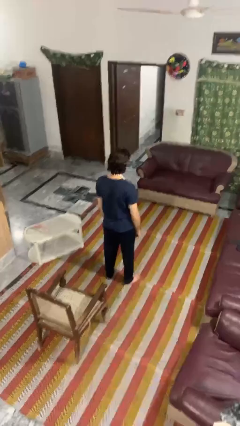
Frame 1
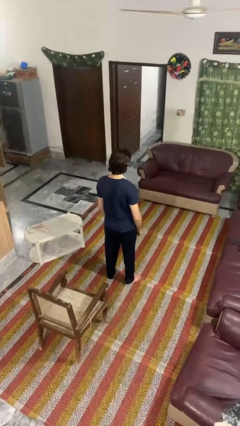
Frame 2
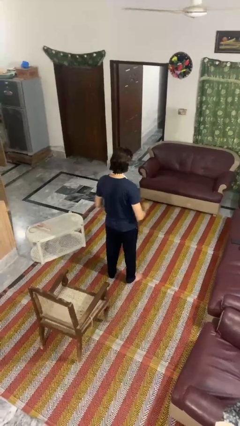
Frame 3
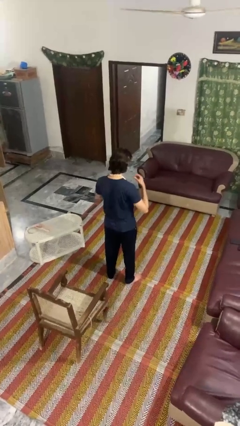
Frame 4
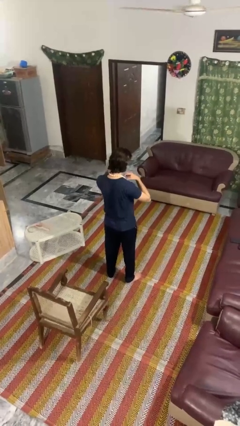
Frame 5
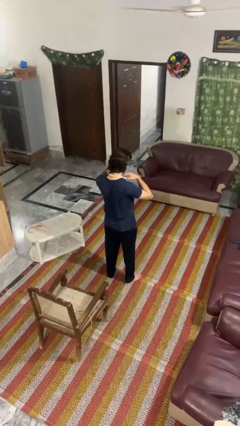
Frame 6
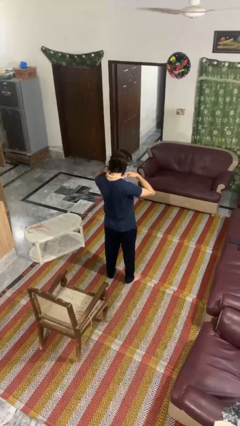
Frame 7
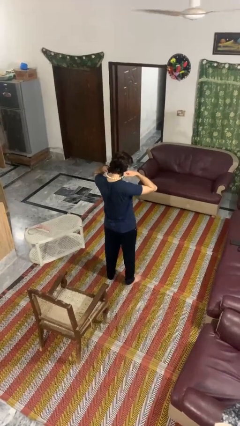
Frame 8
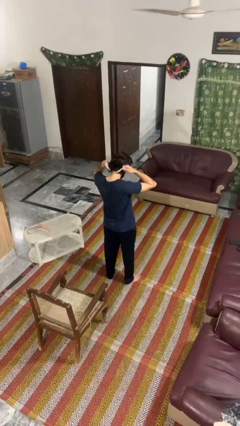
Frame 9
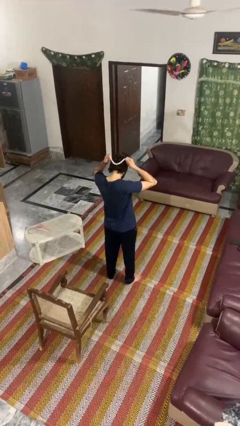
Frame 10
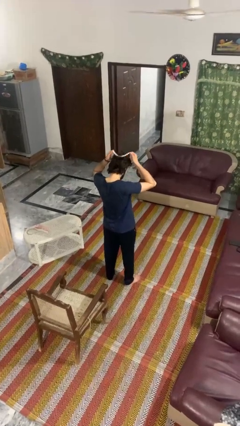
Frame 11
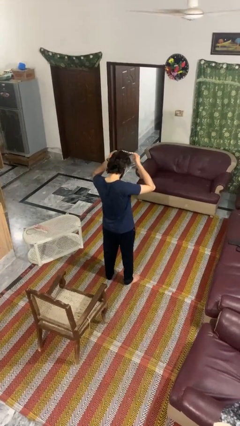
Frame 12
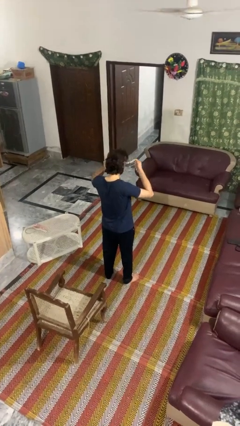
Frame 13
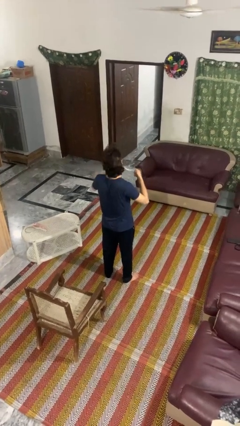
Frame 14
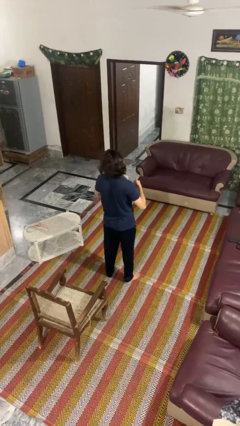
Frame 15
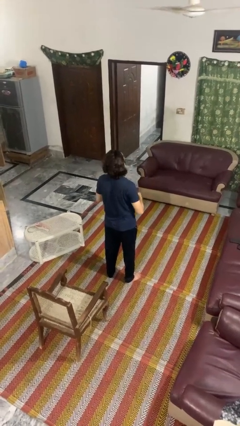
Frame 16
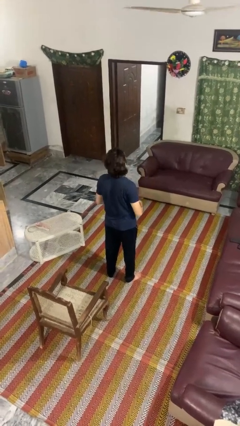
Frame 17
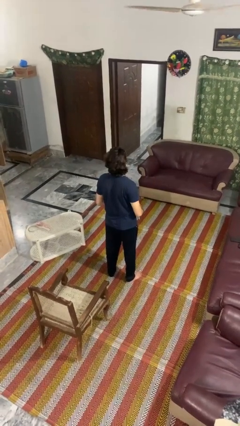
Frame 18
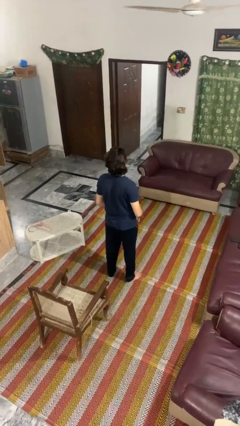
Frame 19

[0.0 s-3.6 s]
person takes off necklace

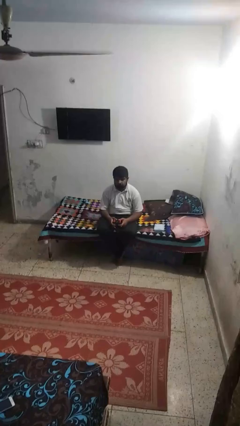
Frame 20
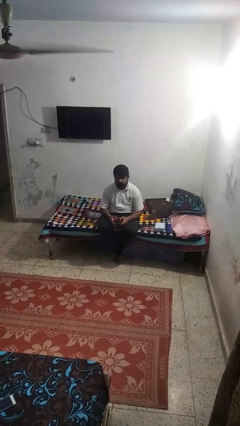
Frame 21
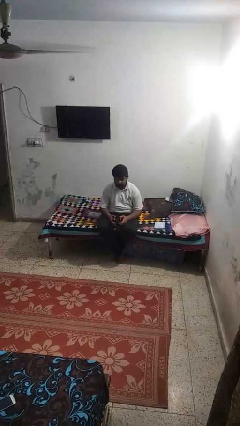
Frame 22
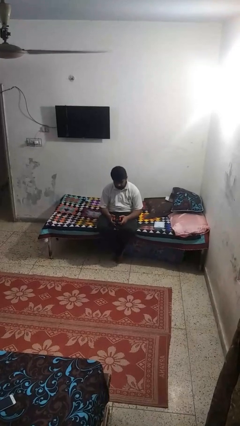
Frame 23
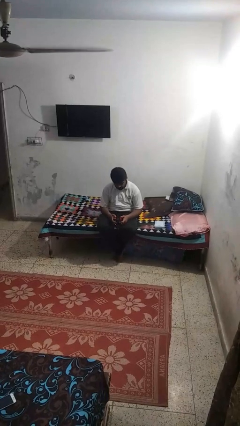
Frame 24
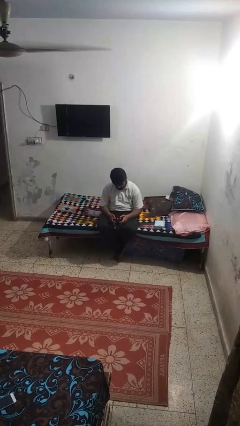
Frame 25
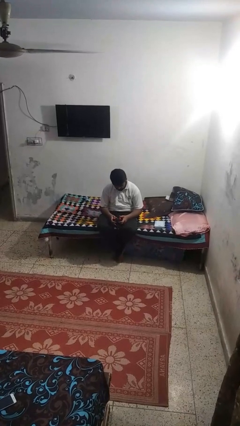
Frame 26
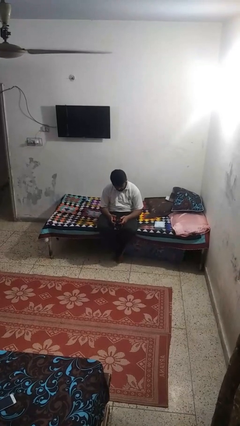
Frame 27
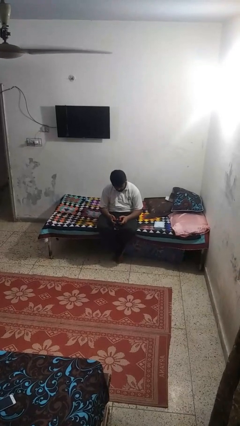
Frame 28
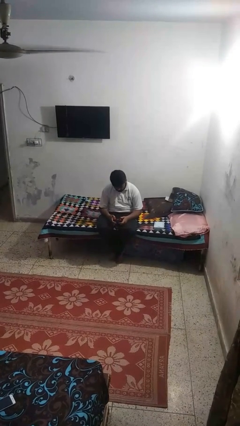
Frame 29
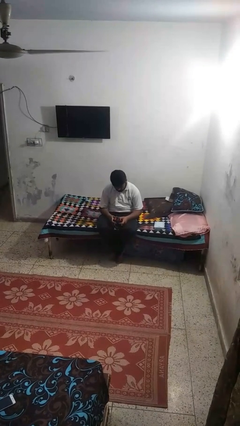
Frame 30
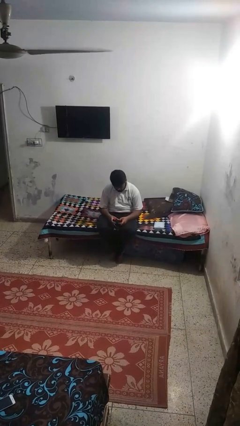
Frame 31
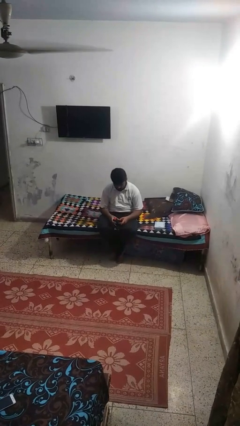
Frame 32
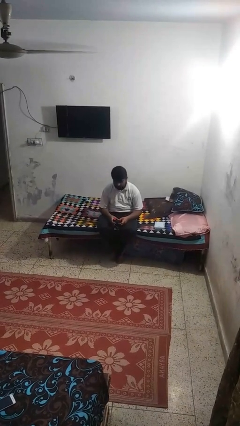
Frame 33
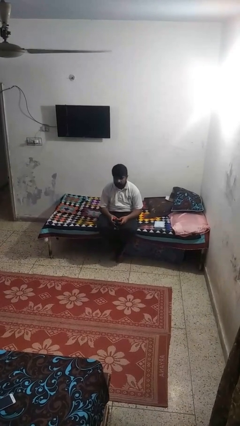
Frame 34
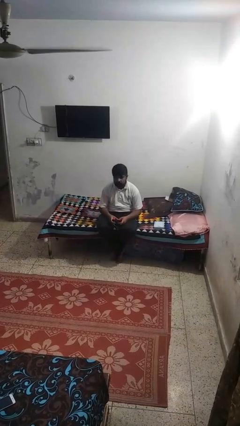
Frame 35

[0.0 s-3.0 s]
person interacts with handheld game

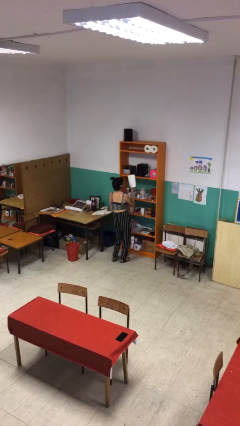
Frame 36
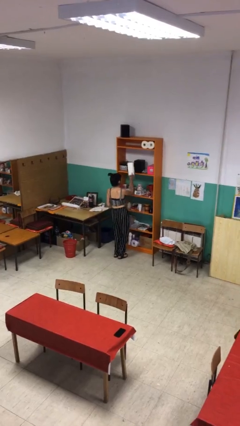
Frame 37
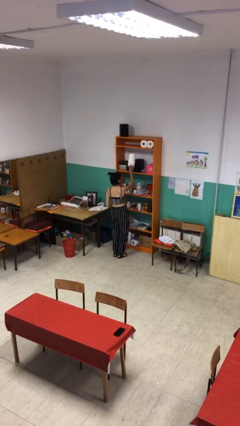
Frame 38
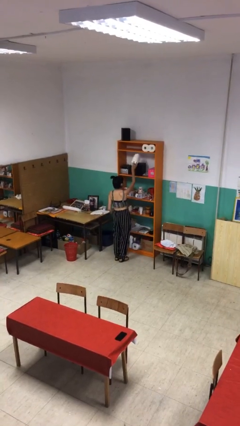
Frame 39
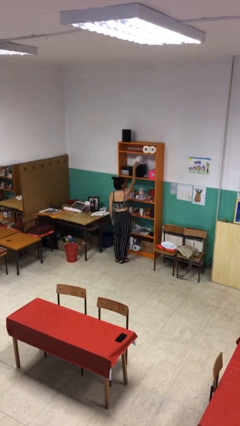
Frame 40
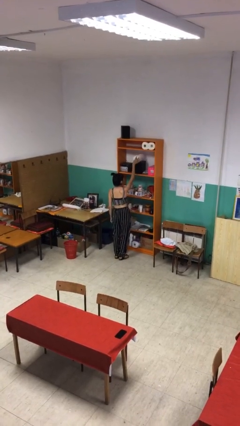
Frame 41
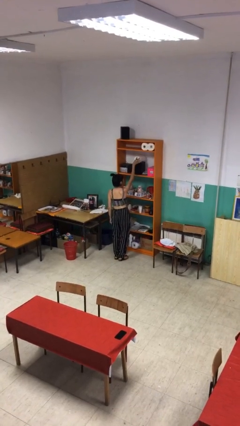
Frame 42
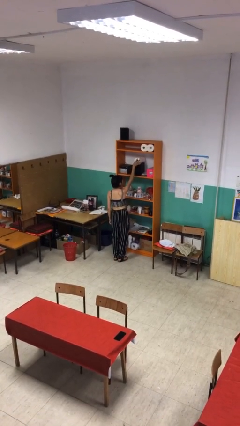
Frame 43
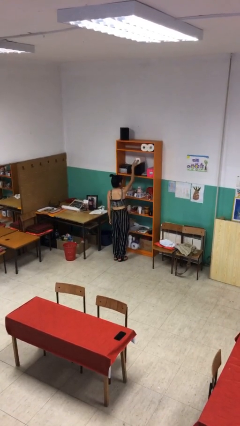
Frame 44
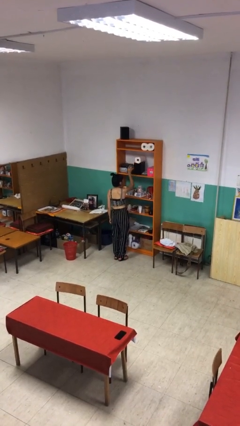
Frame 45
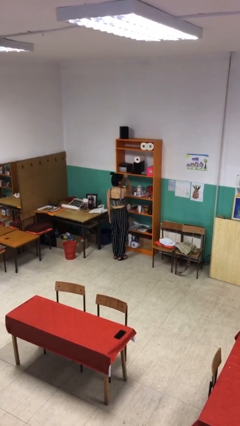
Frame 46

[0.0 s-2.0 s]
person puts down object on shelf

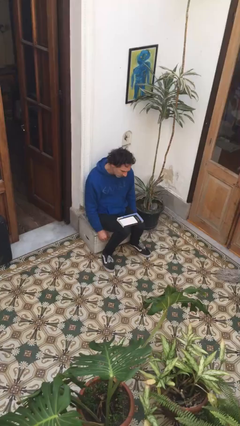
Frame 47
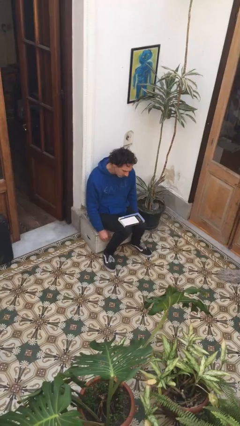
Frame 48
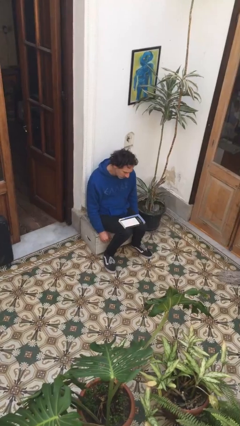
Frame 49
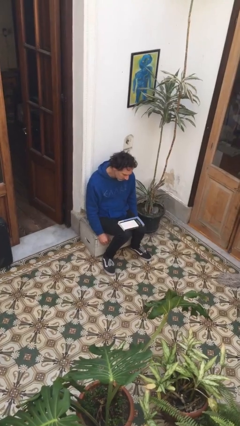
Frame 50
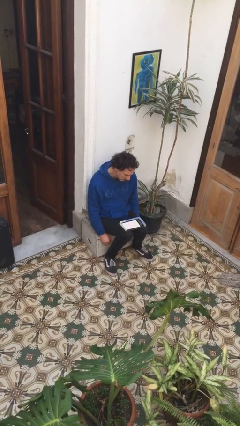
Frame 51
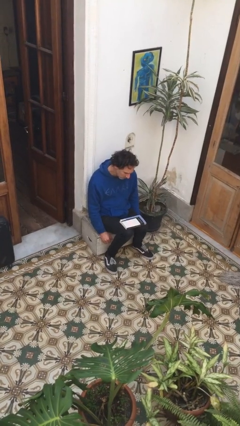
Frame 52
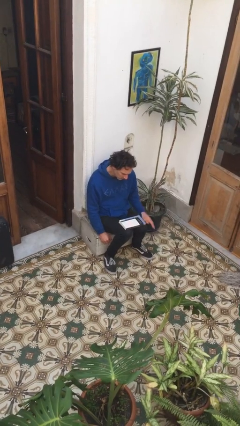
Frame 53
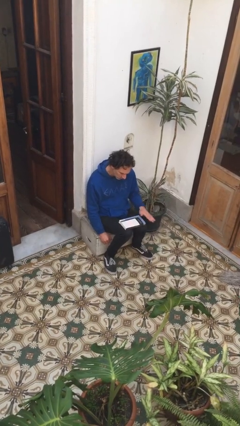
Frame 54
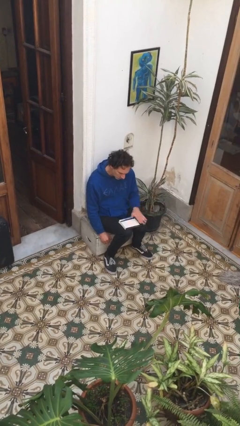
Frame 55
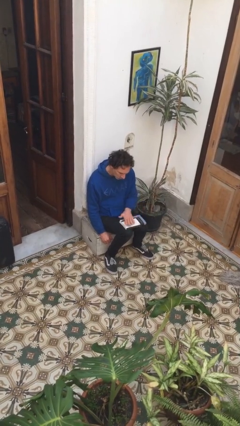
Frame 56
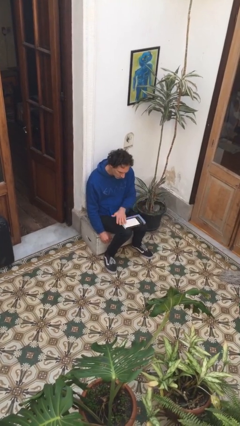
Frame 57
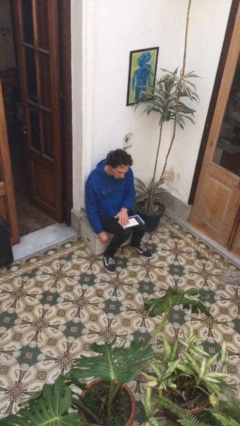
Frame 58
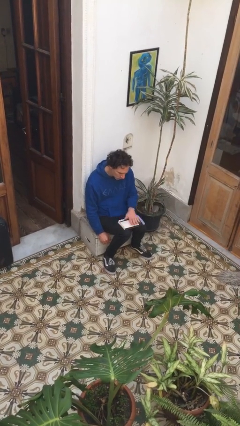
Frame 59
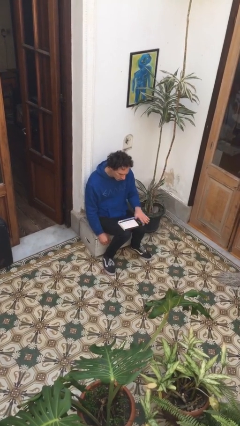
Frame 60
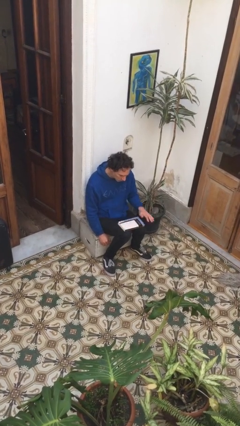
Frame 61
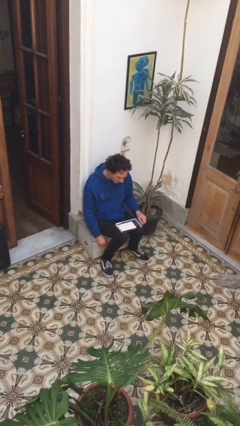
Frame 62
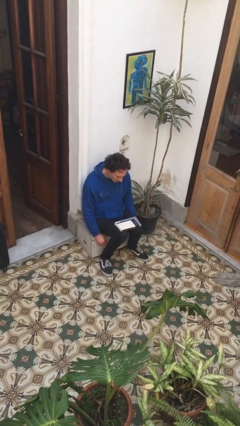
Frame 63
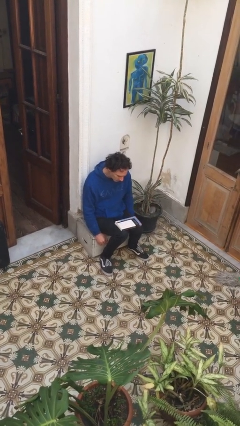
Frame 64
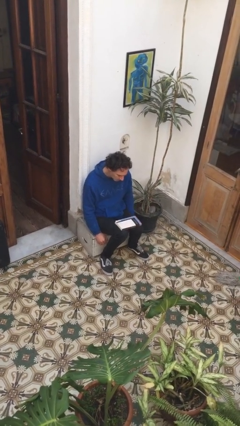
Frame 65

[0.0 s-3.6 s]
person waves hand over object

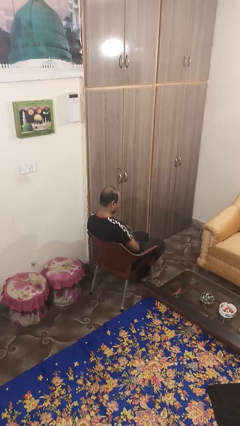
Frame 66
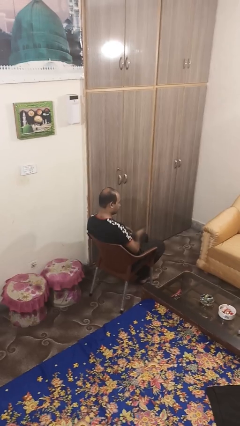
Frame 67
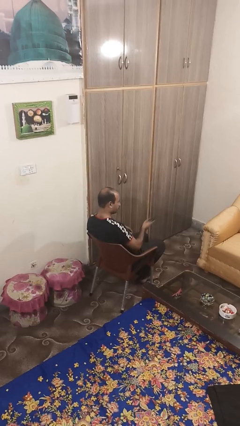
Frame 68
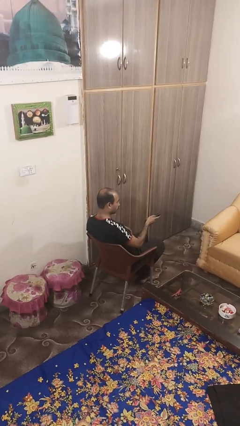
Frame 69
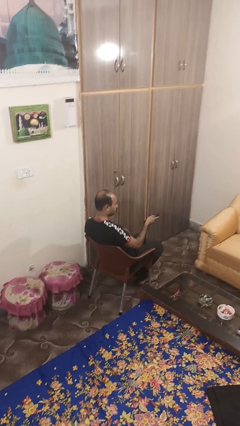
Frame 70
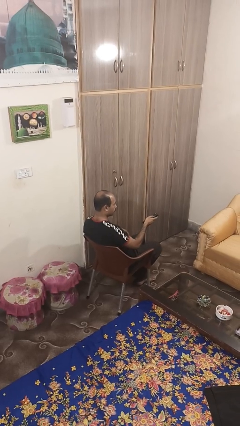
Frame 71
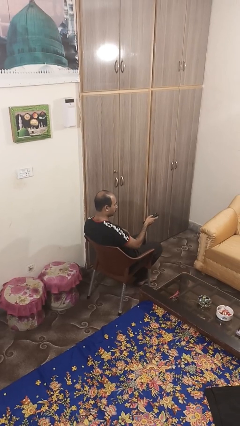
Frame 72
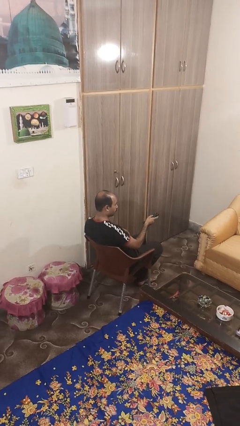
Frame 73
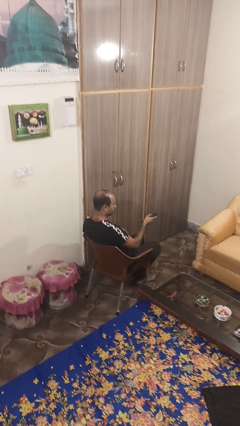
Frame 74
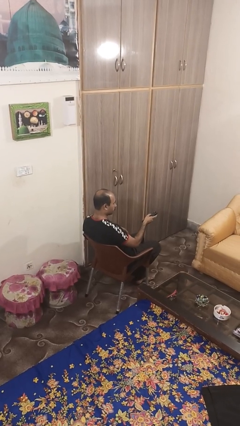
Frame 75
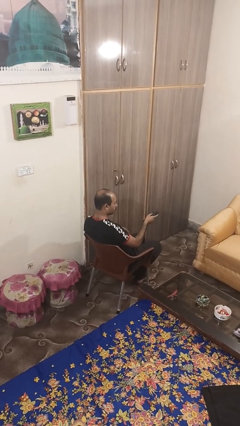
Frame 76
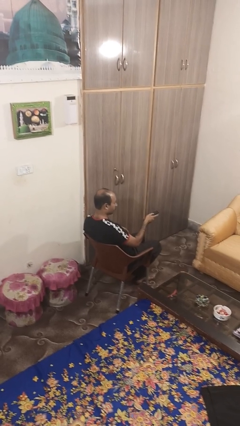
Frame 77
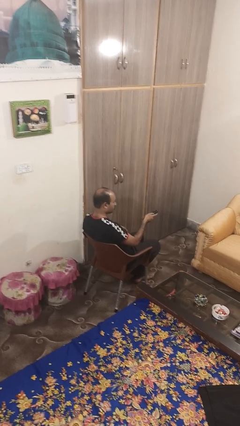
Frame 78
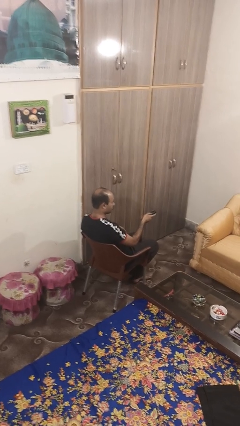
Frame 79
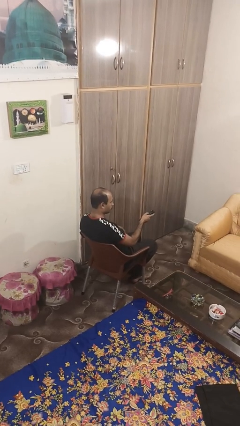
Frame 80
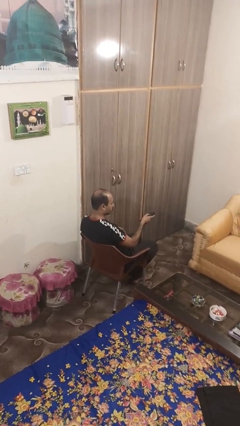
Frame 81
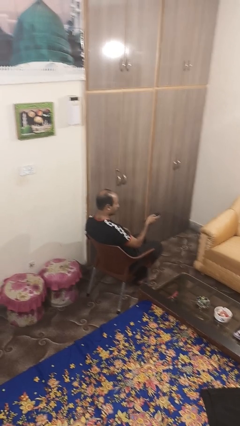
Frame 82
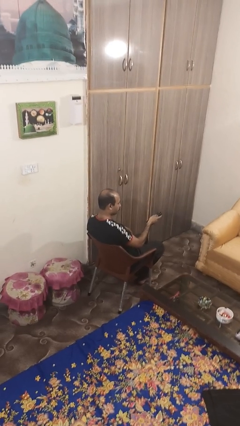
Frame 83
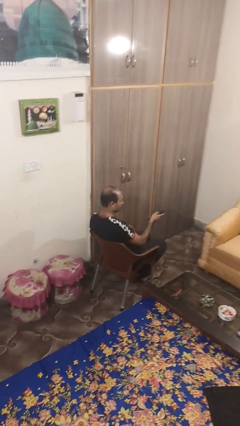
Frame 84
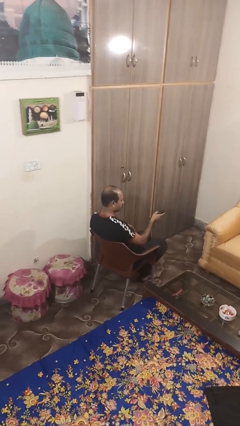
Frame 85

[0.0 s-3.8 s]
person uses television remote

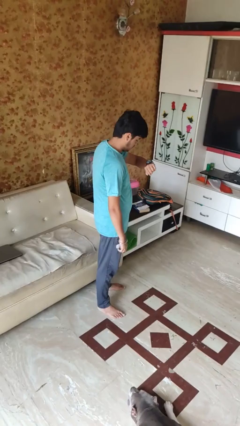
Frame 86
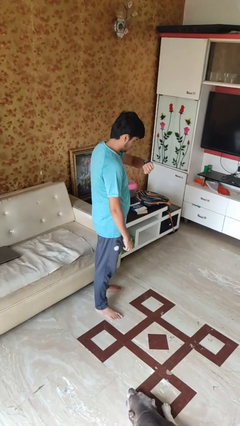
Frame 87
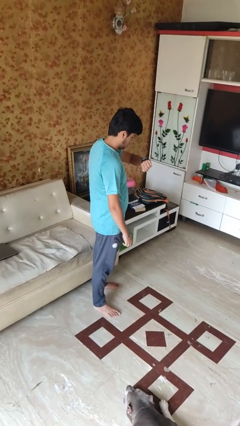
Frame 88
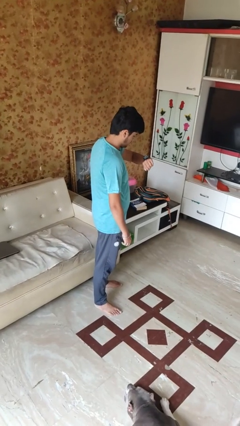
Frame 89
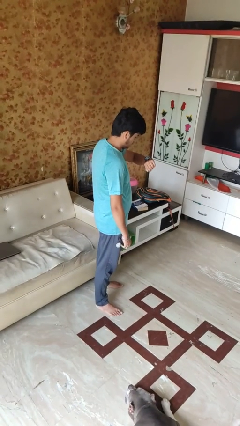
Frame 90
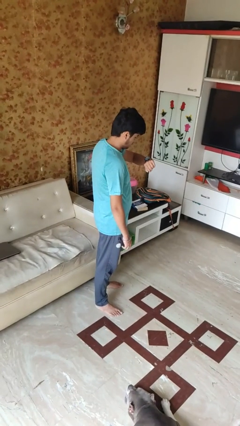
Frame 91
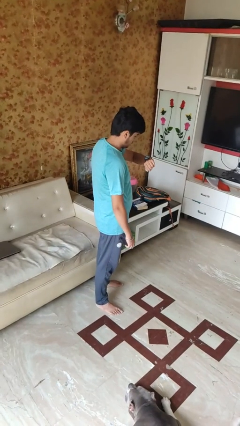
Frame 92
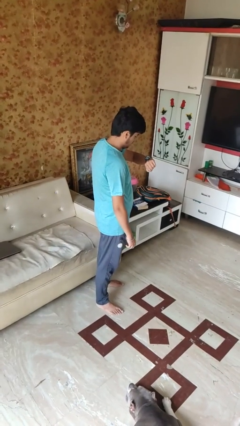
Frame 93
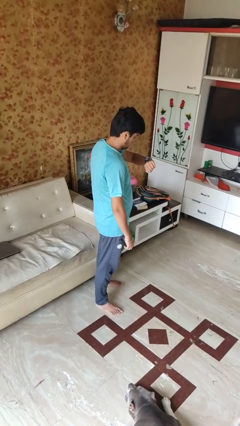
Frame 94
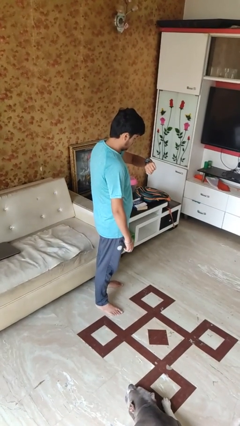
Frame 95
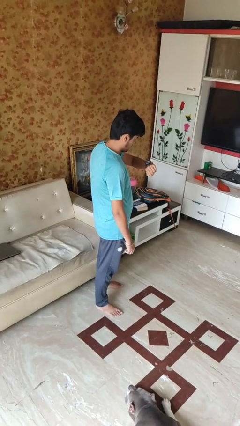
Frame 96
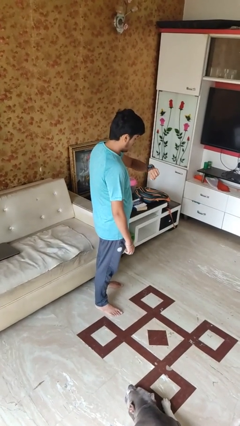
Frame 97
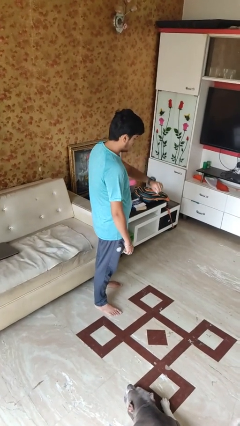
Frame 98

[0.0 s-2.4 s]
person looks at wristwatch
